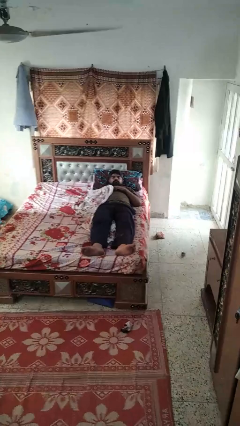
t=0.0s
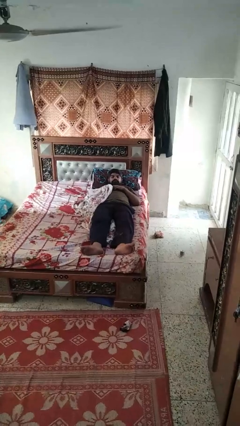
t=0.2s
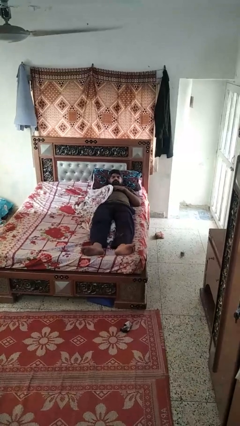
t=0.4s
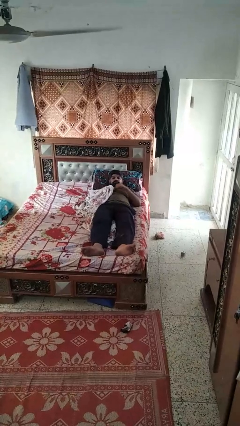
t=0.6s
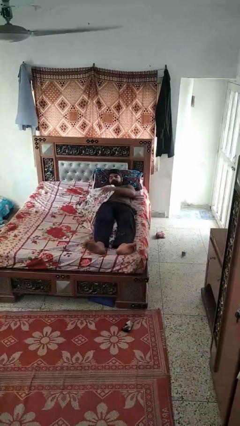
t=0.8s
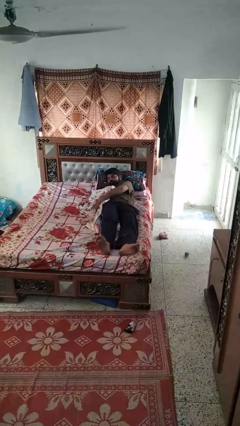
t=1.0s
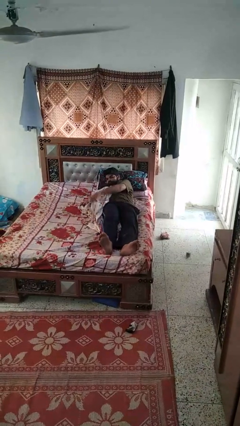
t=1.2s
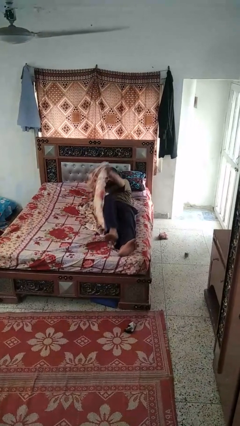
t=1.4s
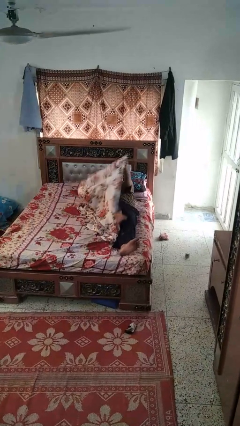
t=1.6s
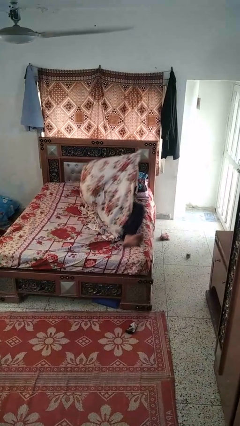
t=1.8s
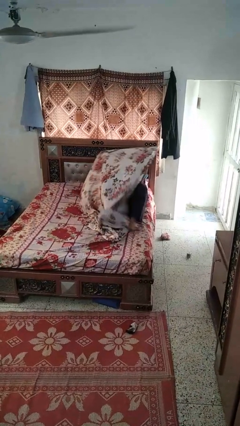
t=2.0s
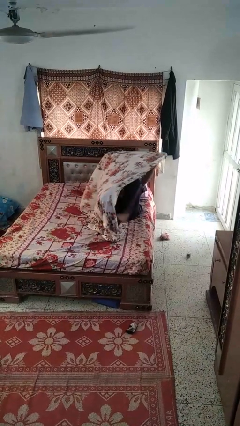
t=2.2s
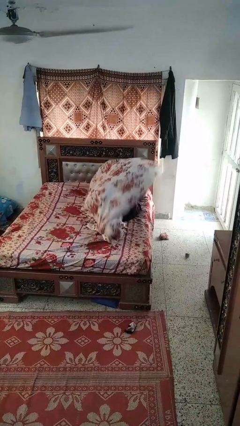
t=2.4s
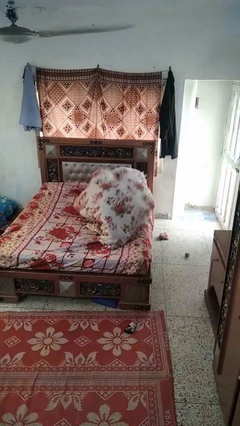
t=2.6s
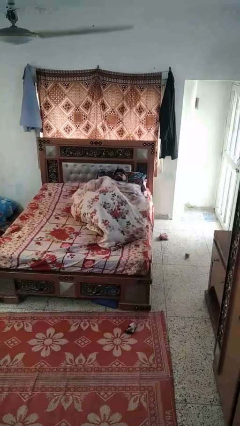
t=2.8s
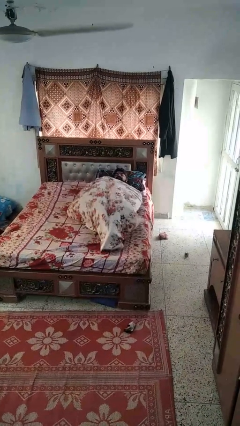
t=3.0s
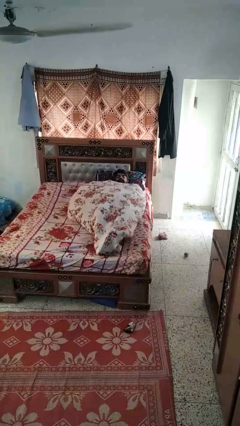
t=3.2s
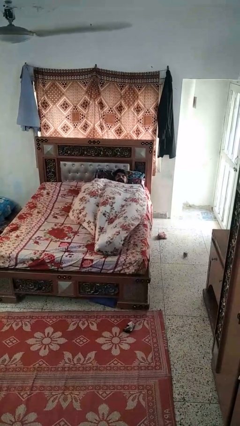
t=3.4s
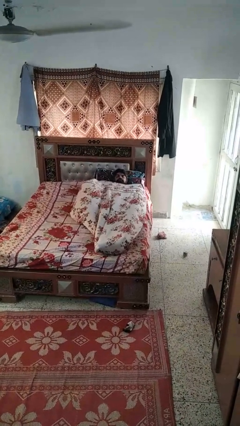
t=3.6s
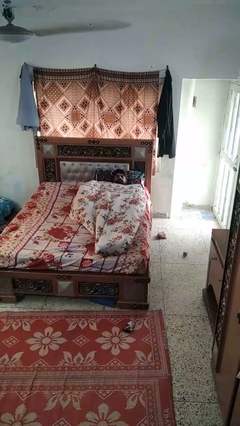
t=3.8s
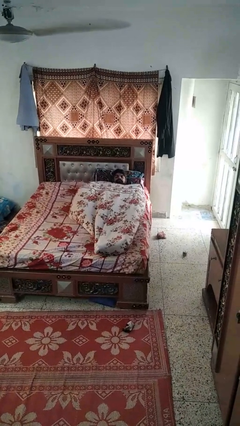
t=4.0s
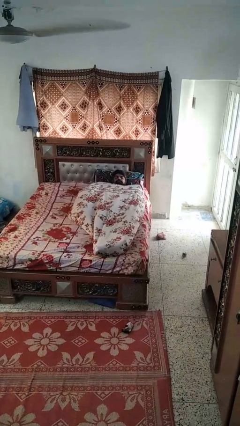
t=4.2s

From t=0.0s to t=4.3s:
person covers with bedsheets

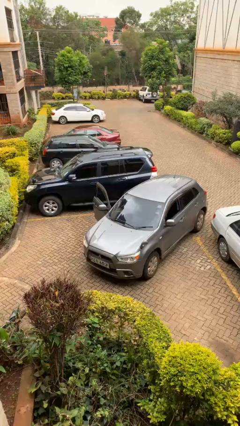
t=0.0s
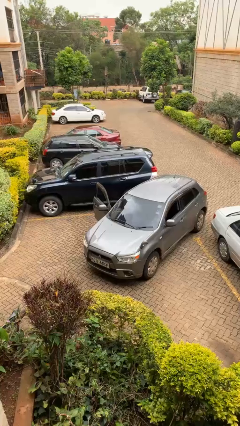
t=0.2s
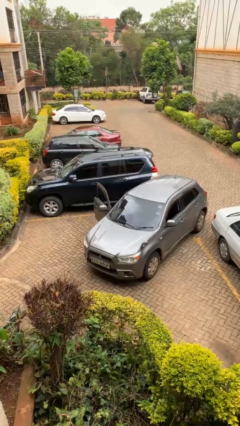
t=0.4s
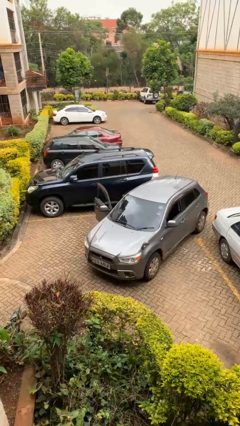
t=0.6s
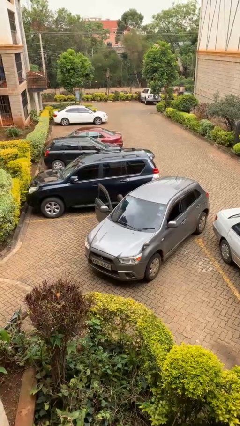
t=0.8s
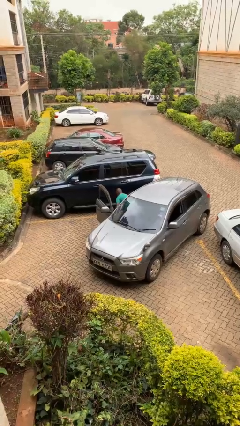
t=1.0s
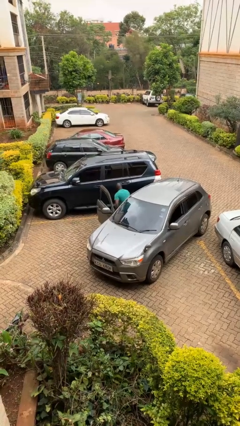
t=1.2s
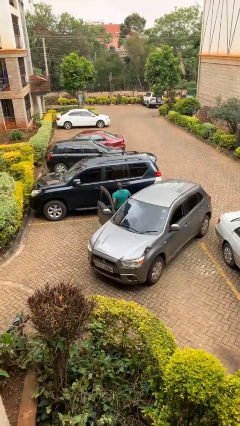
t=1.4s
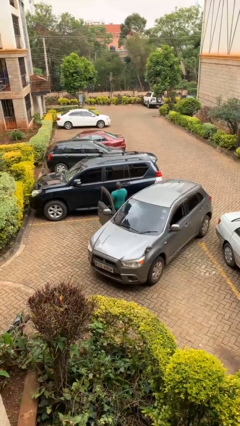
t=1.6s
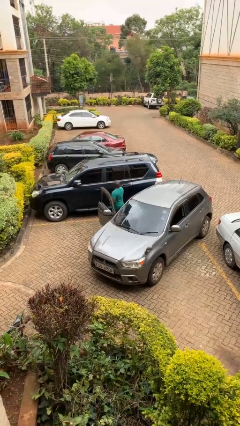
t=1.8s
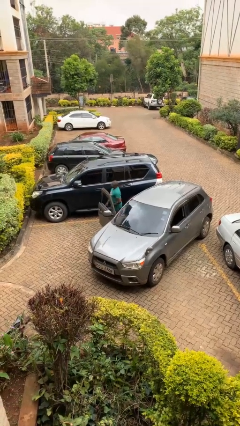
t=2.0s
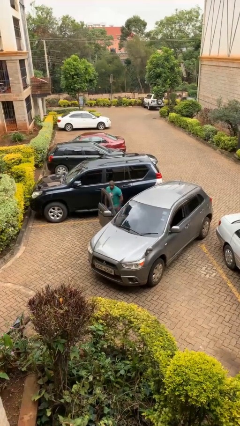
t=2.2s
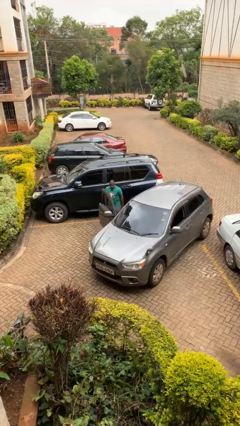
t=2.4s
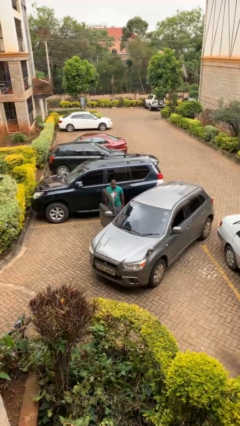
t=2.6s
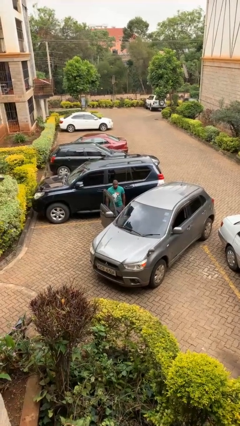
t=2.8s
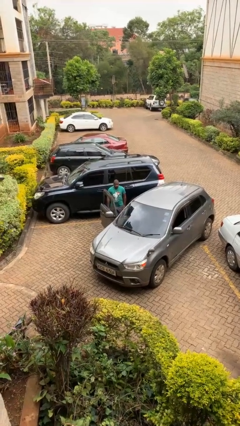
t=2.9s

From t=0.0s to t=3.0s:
person exits car

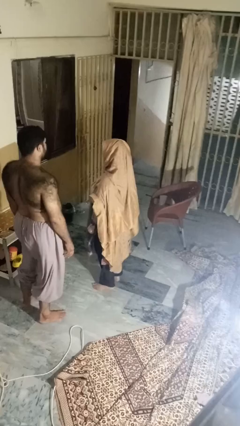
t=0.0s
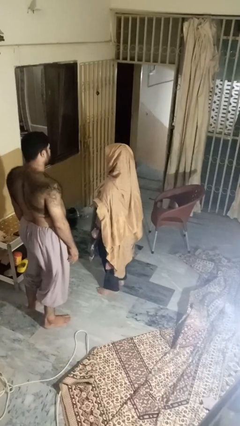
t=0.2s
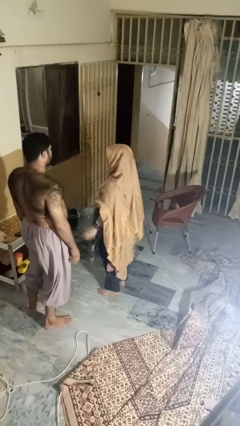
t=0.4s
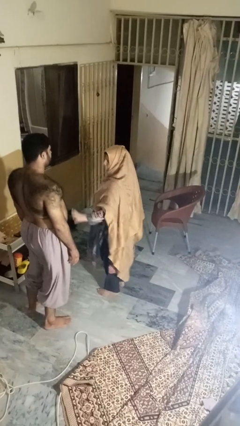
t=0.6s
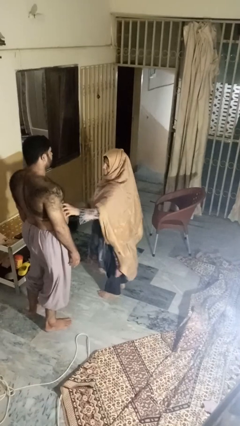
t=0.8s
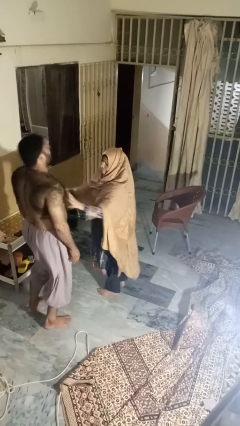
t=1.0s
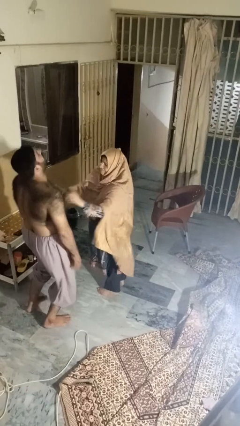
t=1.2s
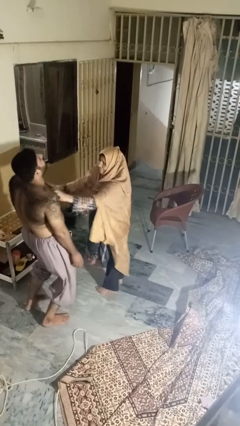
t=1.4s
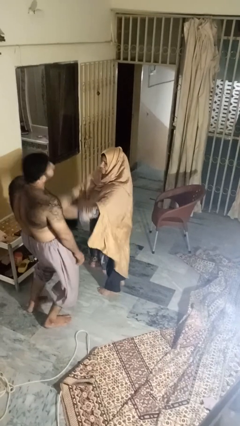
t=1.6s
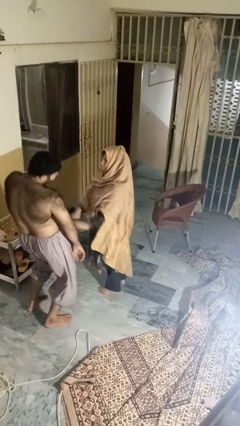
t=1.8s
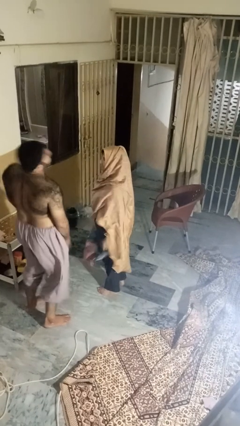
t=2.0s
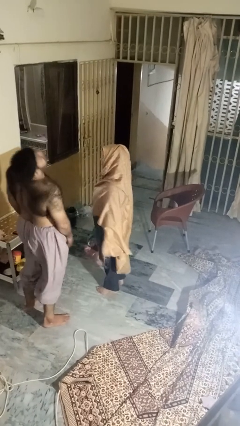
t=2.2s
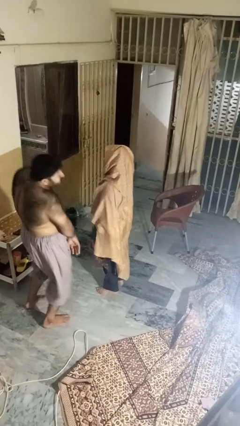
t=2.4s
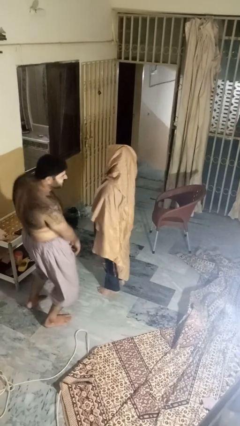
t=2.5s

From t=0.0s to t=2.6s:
person tickles person

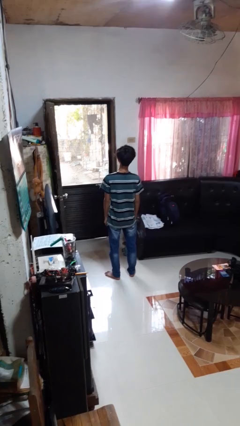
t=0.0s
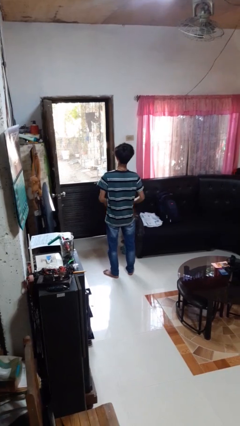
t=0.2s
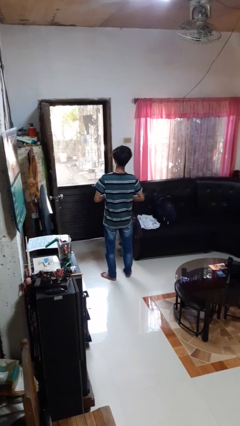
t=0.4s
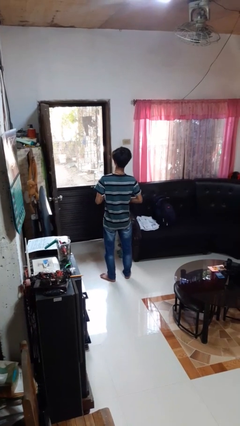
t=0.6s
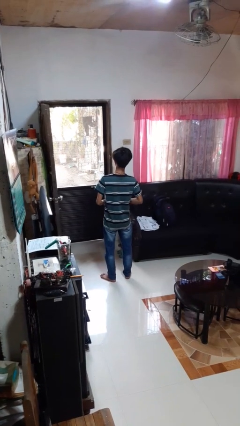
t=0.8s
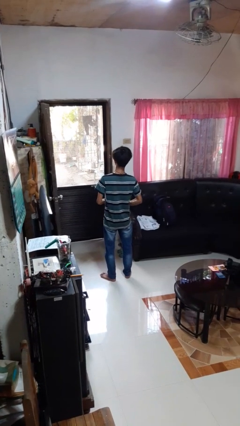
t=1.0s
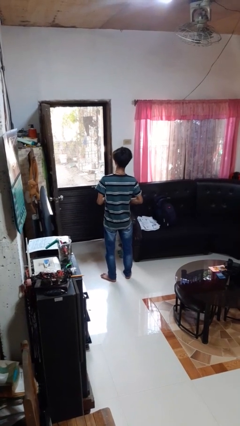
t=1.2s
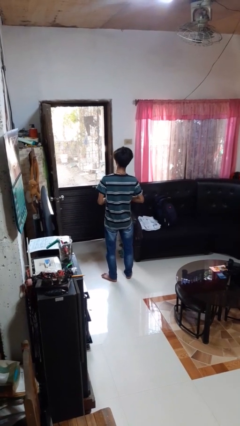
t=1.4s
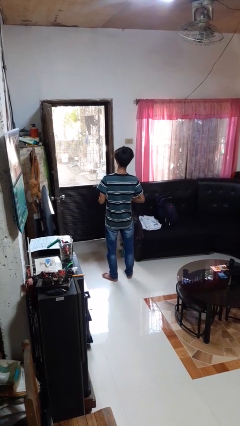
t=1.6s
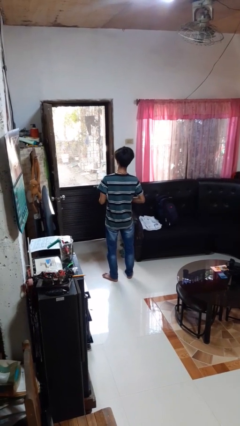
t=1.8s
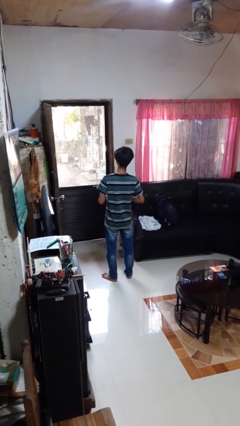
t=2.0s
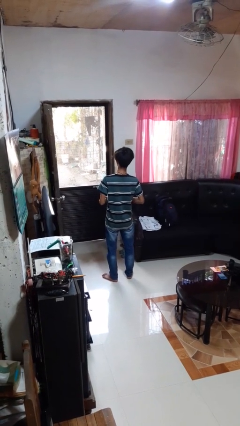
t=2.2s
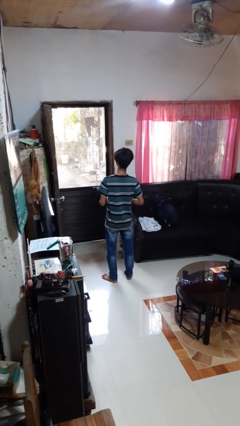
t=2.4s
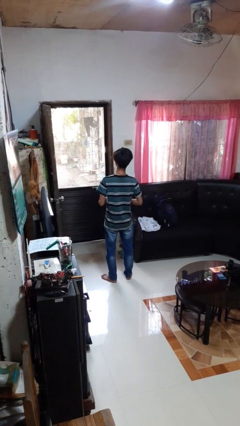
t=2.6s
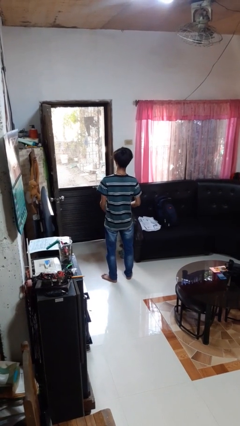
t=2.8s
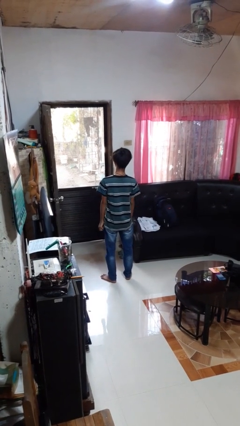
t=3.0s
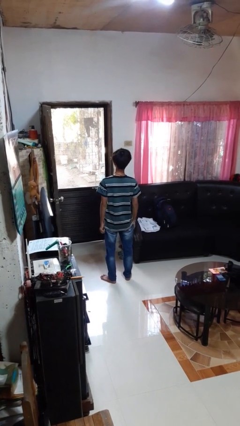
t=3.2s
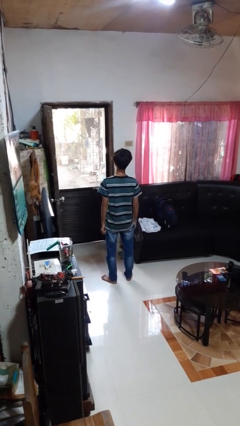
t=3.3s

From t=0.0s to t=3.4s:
person unbuttons shirt

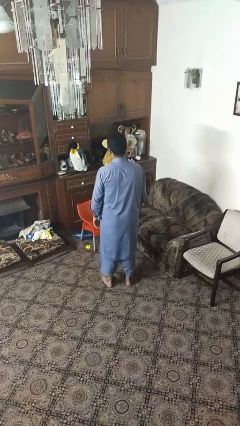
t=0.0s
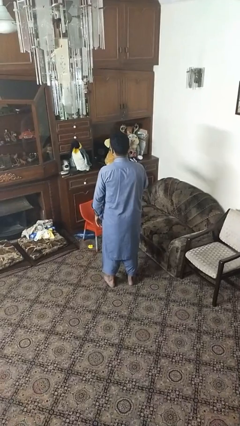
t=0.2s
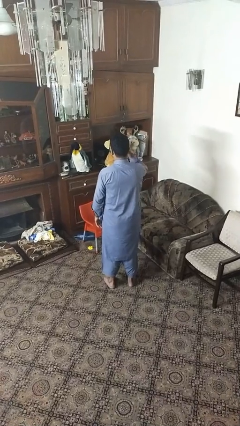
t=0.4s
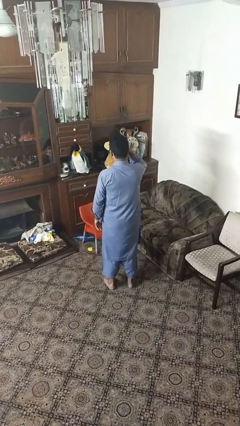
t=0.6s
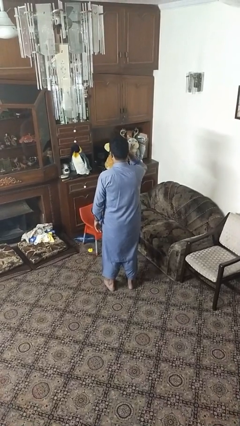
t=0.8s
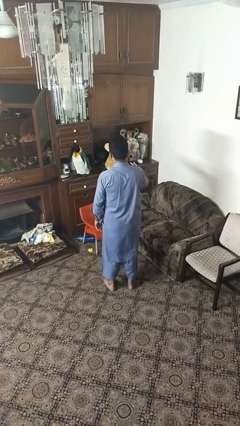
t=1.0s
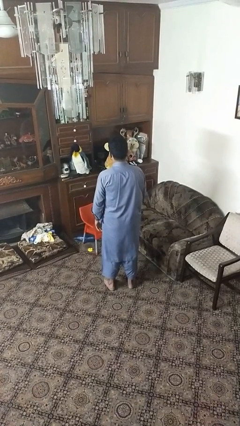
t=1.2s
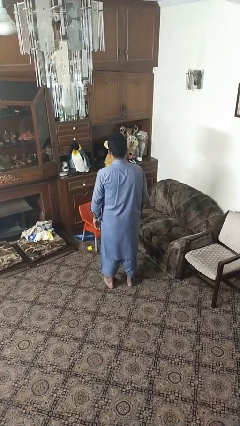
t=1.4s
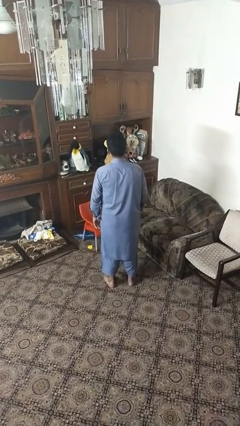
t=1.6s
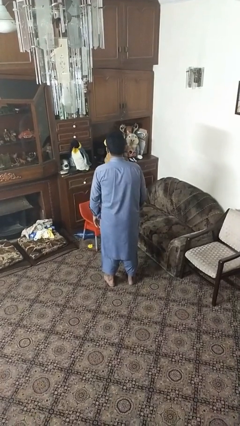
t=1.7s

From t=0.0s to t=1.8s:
person salutes

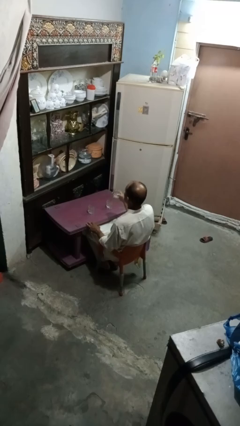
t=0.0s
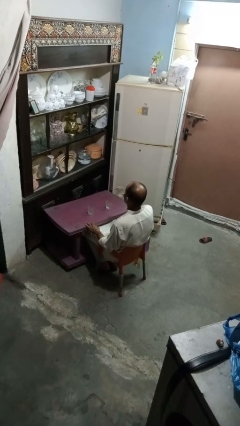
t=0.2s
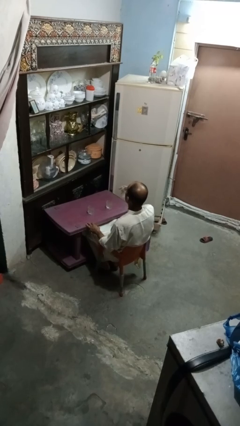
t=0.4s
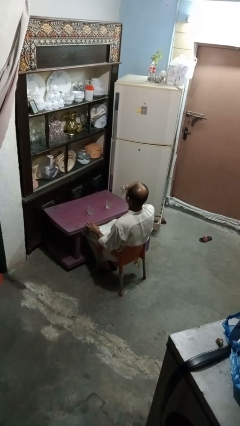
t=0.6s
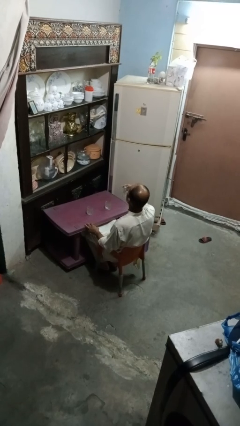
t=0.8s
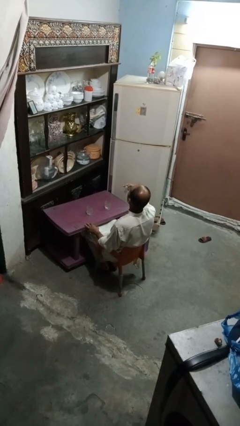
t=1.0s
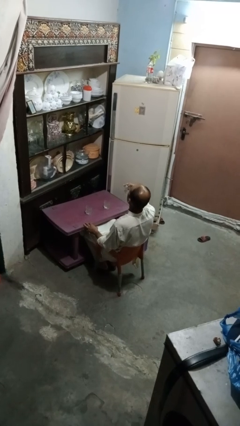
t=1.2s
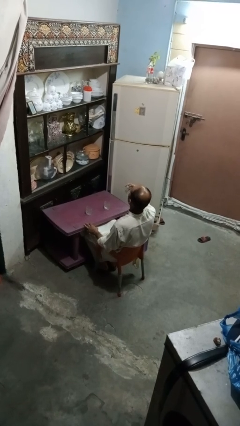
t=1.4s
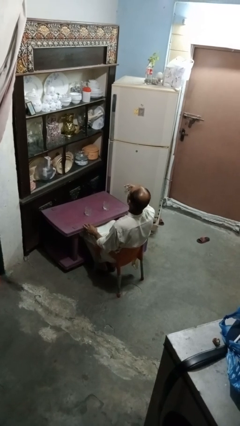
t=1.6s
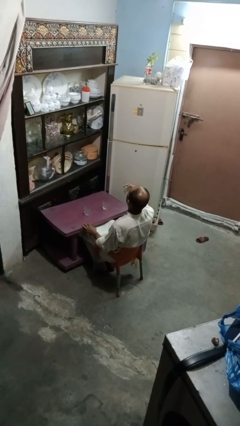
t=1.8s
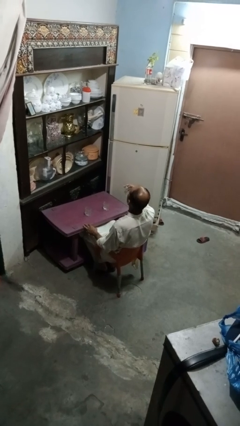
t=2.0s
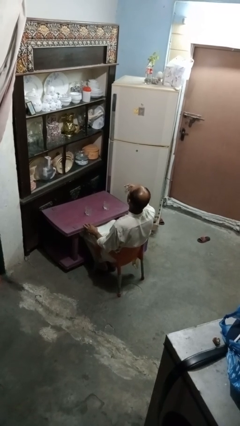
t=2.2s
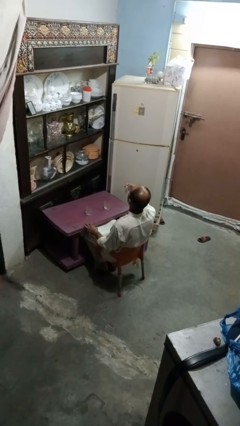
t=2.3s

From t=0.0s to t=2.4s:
person drinks from shotglass
